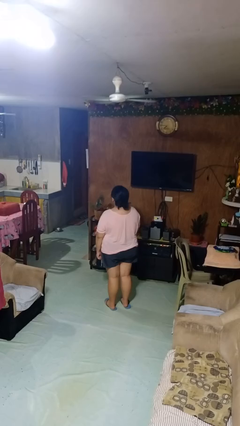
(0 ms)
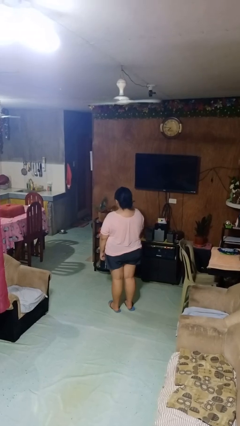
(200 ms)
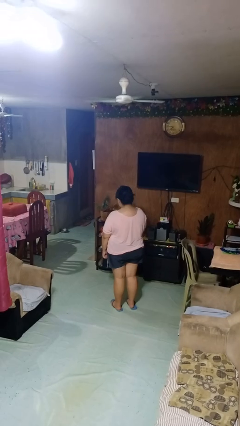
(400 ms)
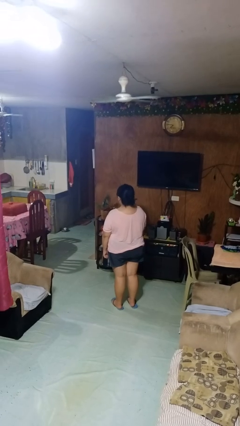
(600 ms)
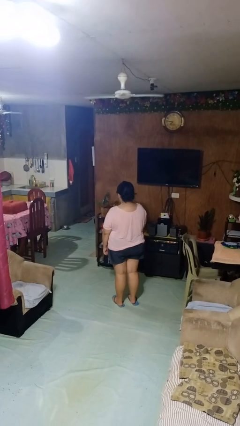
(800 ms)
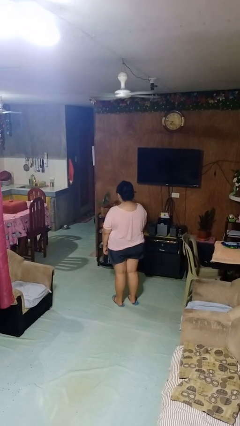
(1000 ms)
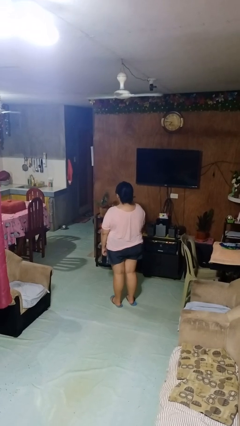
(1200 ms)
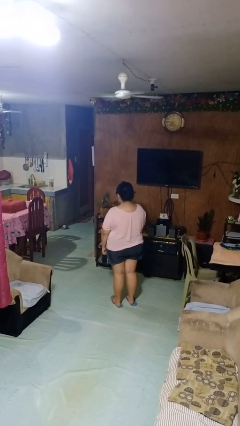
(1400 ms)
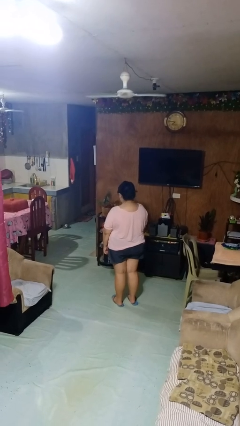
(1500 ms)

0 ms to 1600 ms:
person nods head

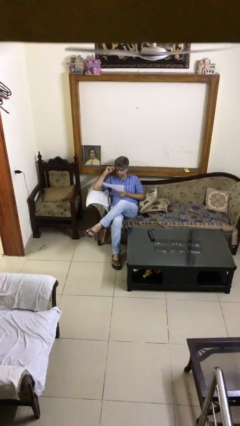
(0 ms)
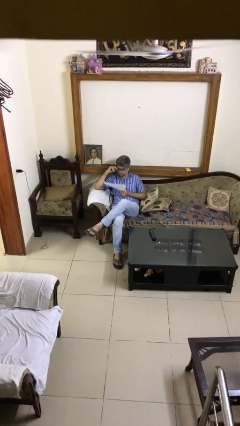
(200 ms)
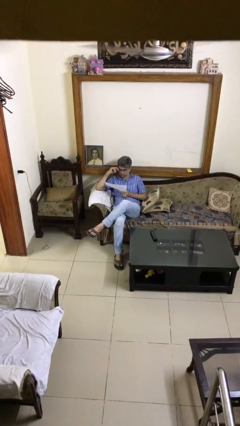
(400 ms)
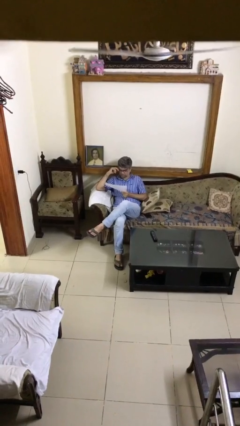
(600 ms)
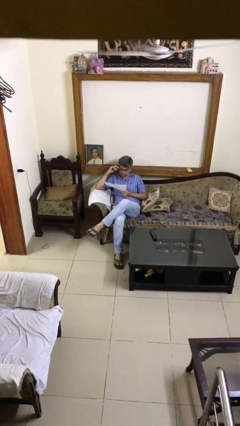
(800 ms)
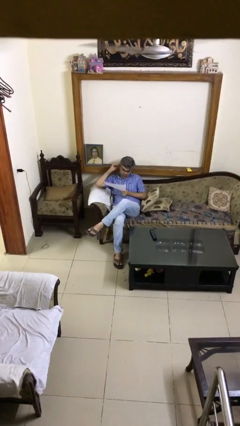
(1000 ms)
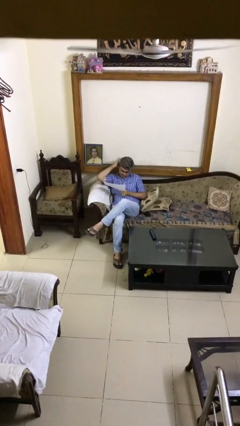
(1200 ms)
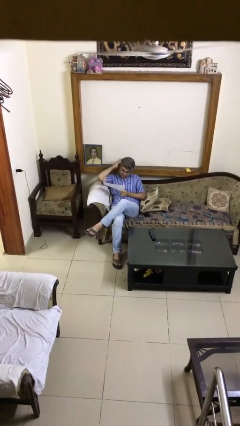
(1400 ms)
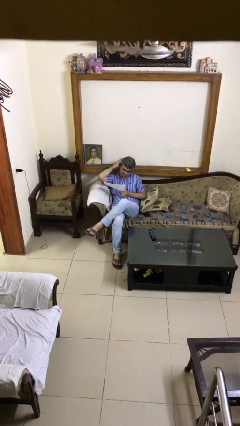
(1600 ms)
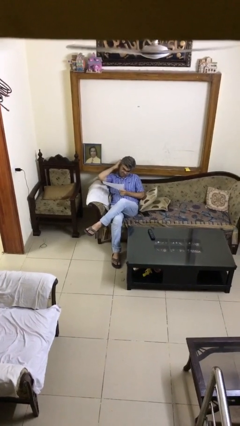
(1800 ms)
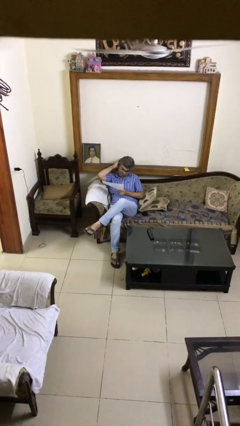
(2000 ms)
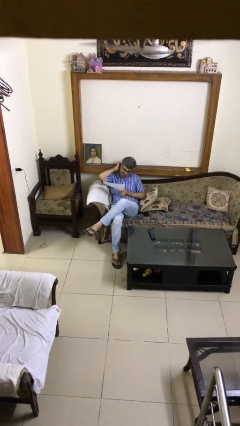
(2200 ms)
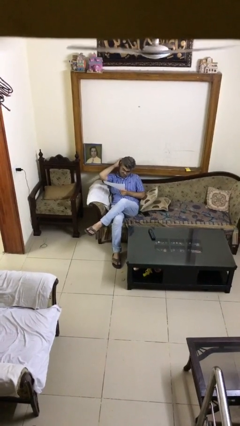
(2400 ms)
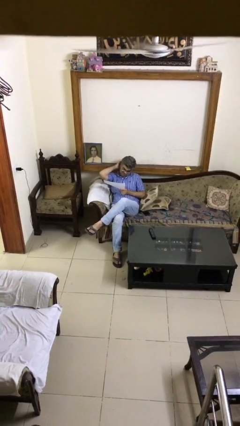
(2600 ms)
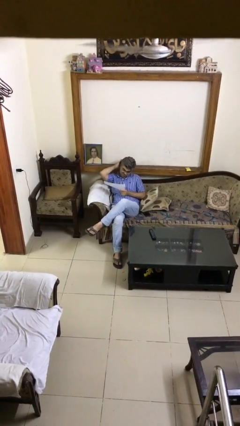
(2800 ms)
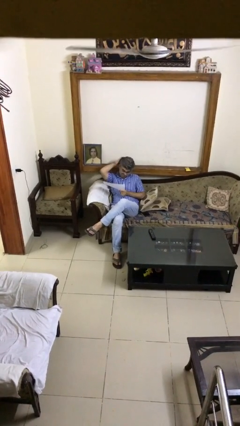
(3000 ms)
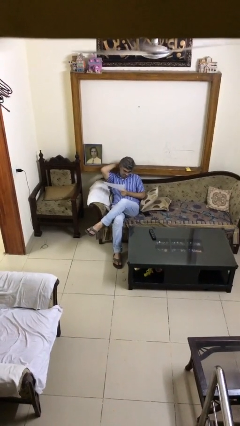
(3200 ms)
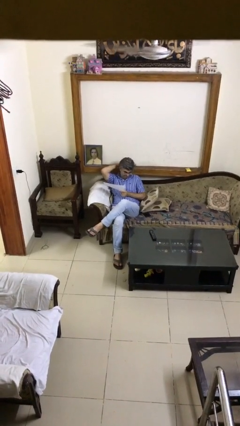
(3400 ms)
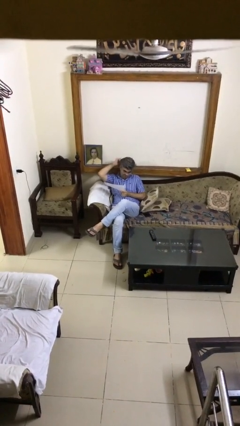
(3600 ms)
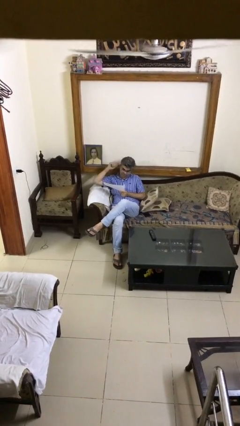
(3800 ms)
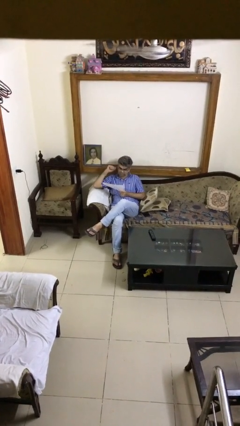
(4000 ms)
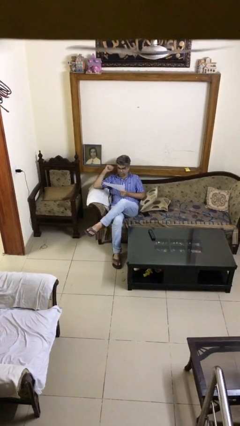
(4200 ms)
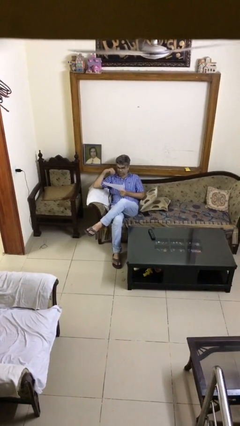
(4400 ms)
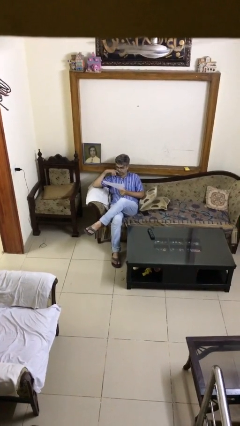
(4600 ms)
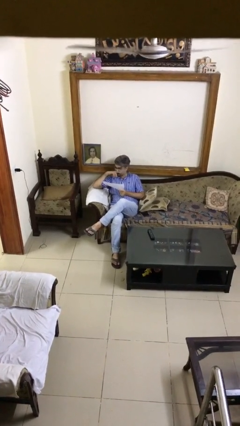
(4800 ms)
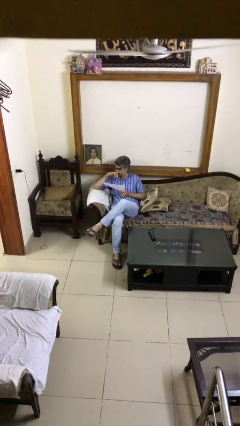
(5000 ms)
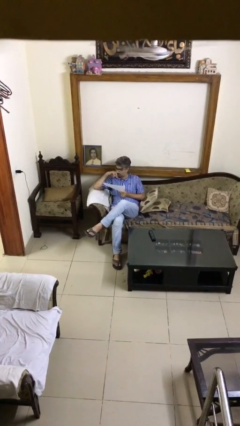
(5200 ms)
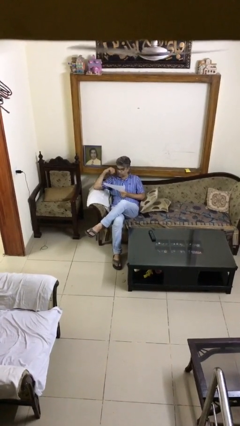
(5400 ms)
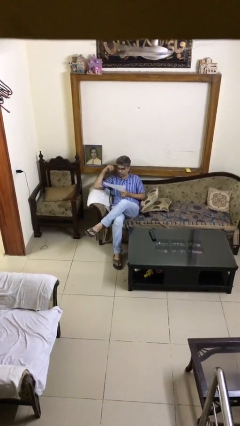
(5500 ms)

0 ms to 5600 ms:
person reads document

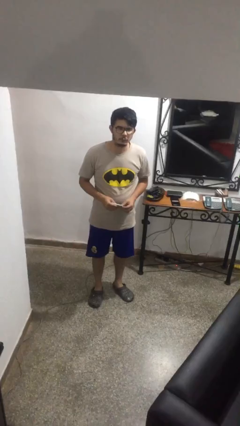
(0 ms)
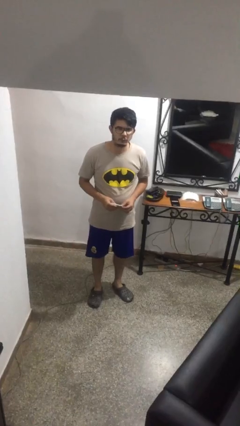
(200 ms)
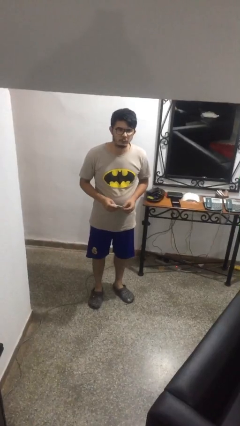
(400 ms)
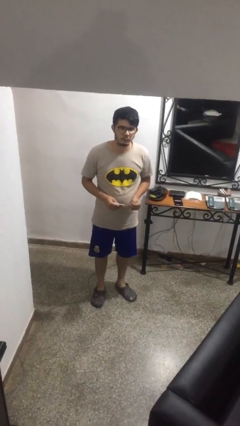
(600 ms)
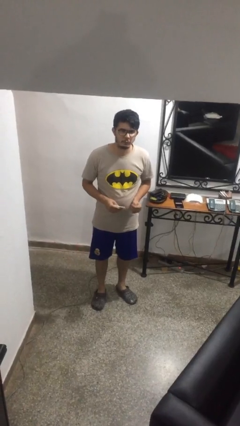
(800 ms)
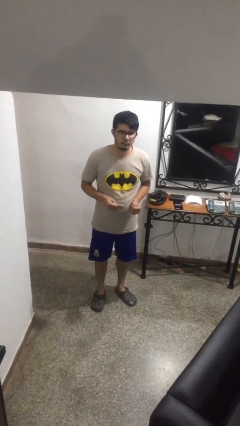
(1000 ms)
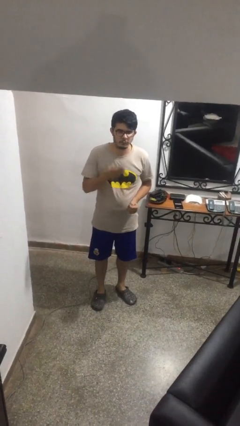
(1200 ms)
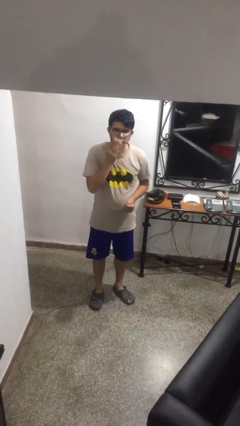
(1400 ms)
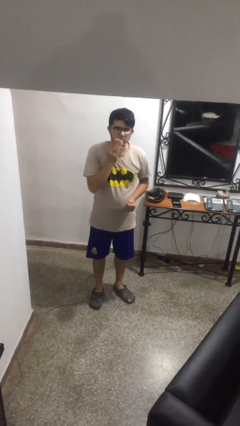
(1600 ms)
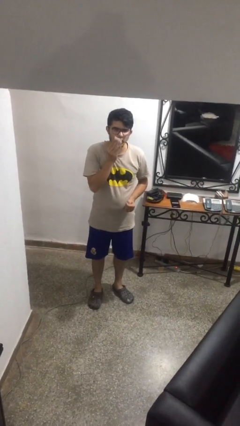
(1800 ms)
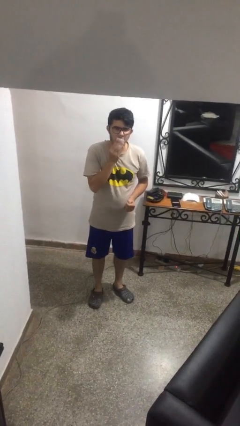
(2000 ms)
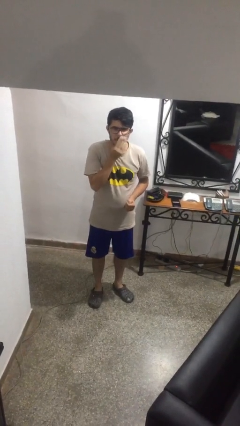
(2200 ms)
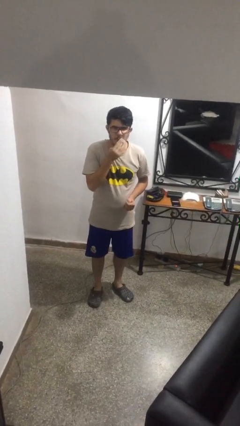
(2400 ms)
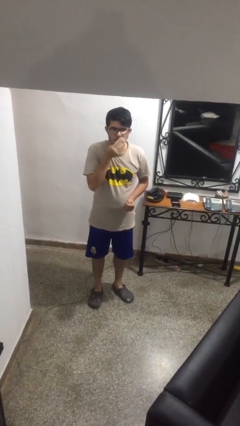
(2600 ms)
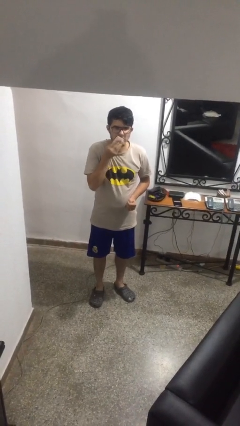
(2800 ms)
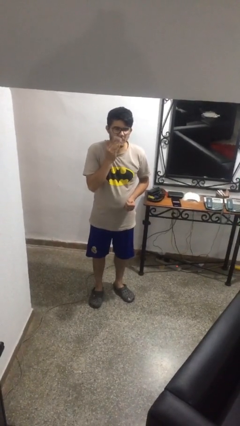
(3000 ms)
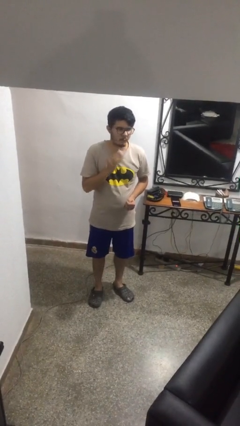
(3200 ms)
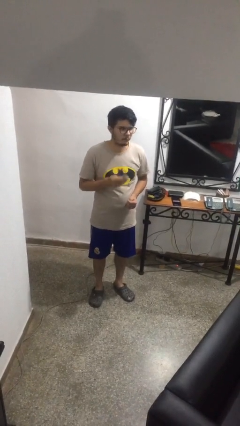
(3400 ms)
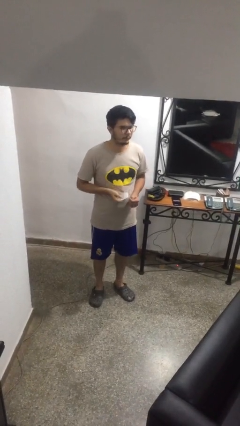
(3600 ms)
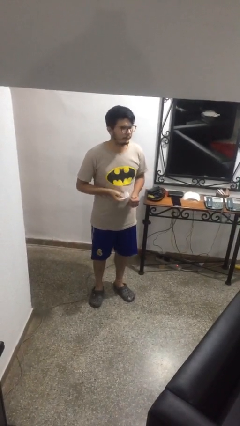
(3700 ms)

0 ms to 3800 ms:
person wipes mouth with napkin

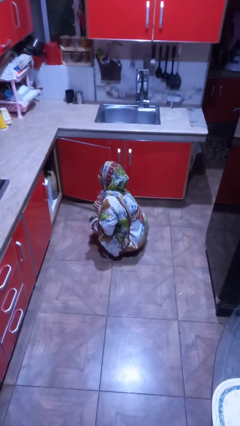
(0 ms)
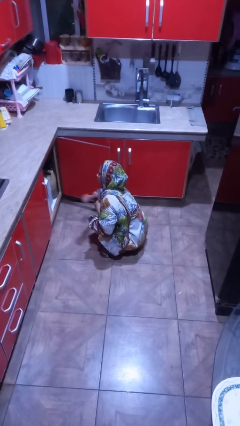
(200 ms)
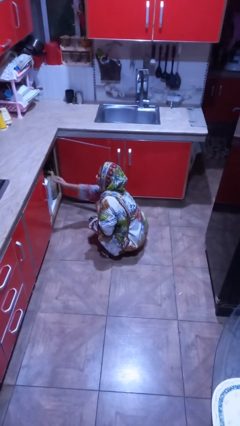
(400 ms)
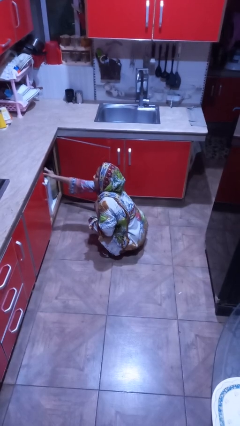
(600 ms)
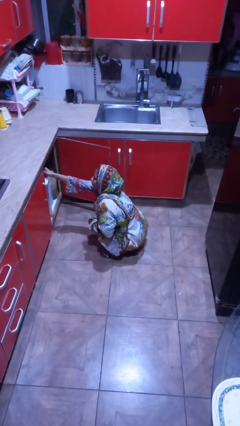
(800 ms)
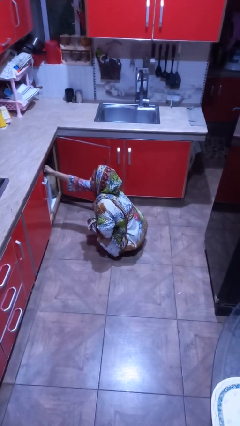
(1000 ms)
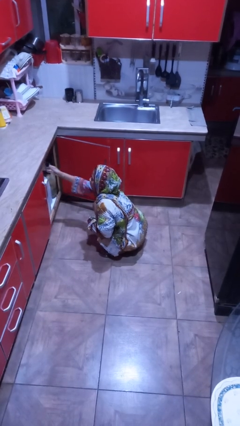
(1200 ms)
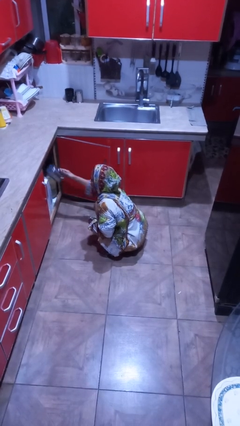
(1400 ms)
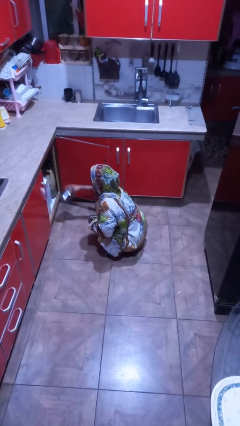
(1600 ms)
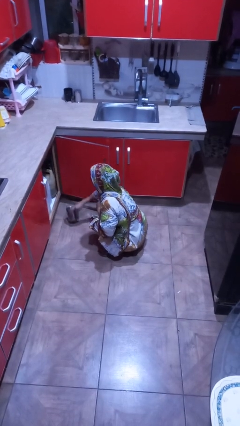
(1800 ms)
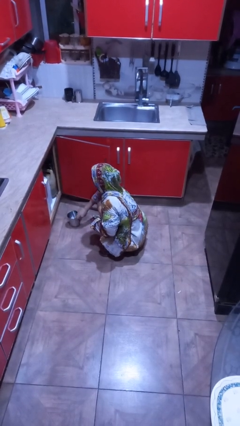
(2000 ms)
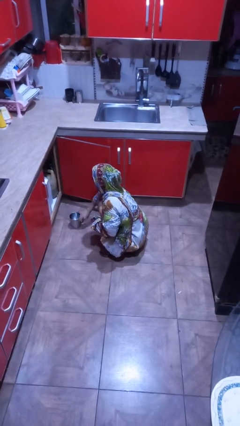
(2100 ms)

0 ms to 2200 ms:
person takes object from cabinet

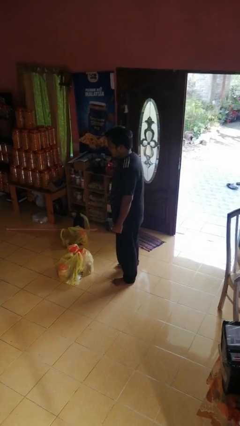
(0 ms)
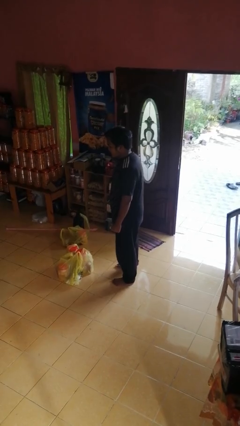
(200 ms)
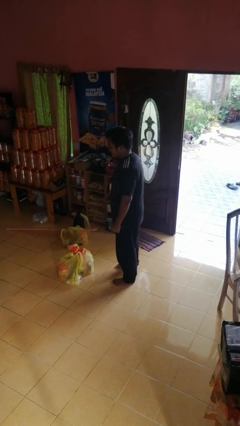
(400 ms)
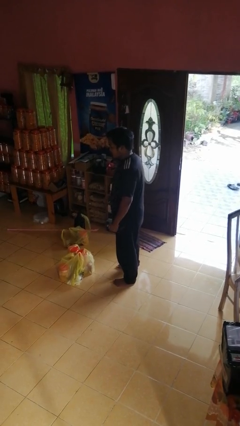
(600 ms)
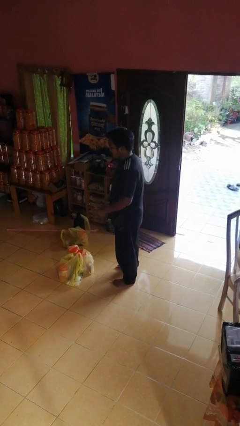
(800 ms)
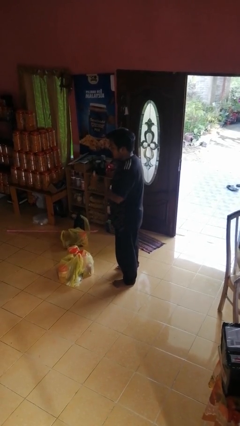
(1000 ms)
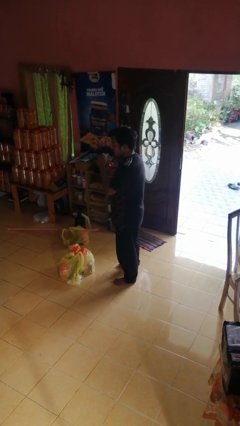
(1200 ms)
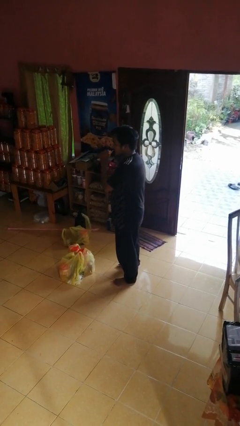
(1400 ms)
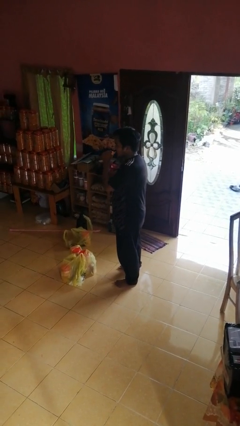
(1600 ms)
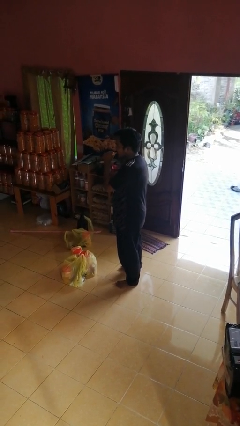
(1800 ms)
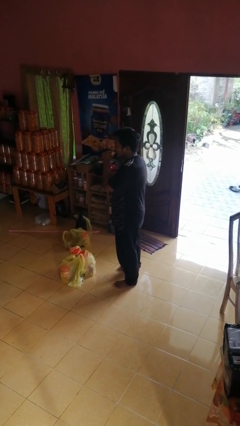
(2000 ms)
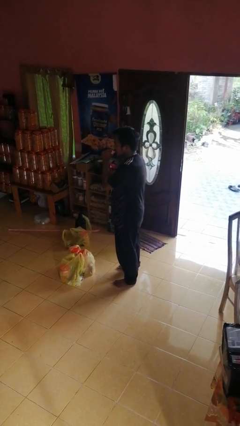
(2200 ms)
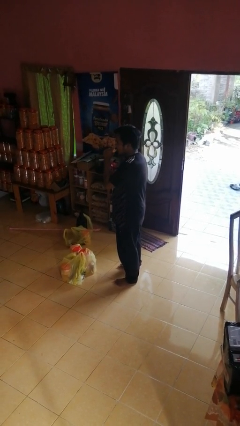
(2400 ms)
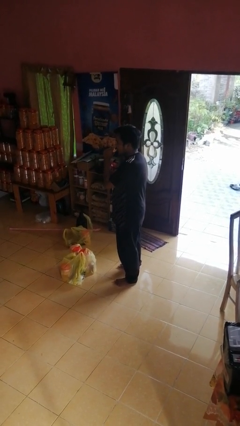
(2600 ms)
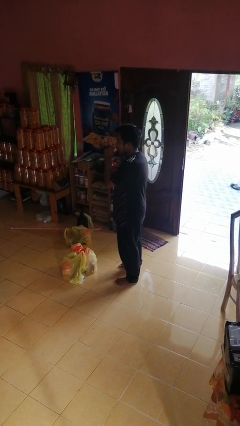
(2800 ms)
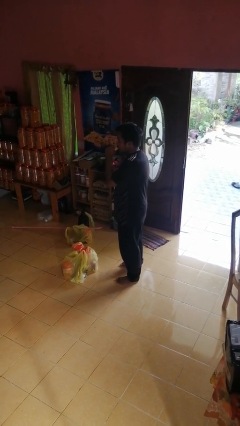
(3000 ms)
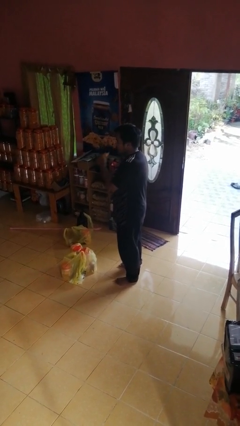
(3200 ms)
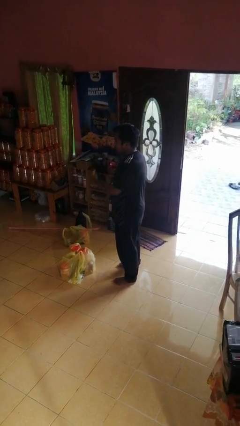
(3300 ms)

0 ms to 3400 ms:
person eats banana

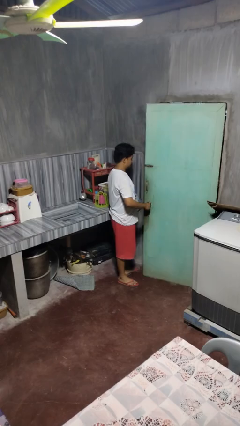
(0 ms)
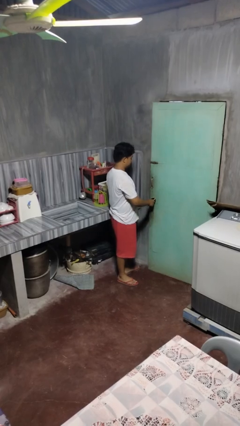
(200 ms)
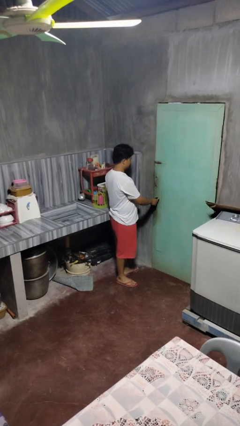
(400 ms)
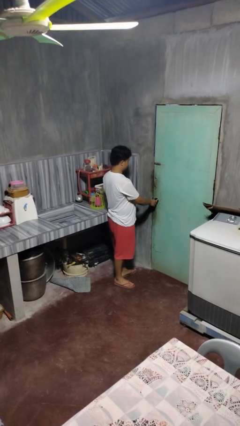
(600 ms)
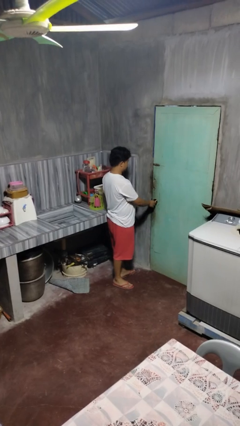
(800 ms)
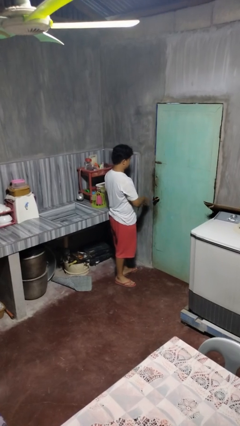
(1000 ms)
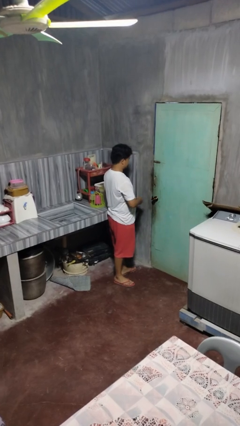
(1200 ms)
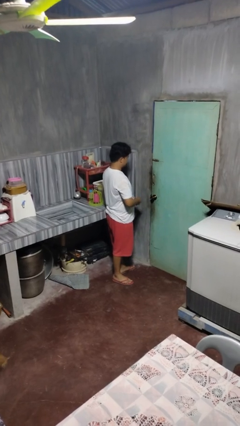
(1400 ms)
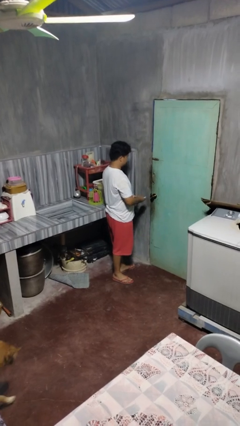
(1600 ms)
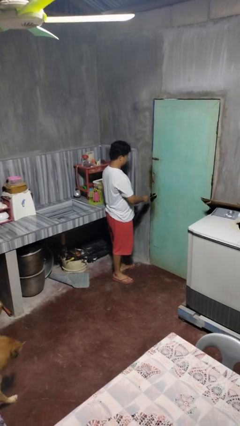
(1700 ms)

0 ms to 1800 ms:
person closes facility door
